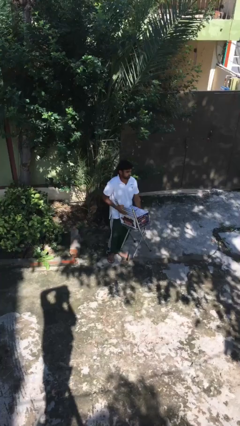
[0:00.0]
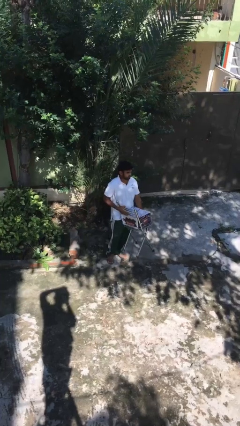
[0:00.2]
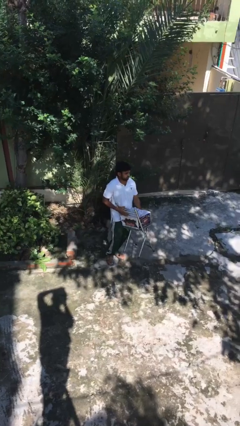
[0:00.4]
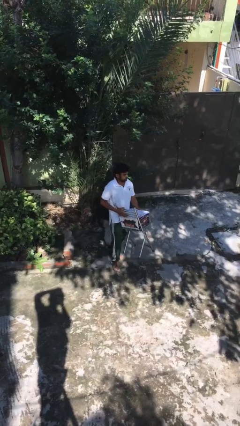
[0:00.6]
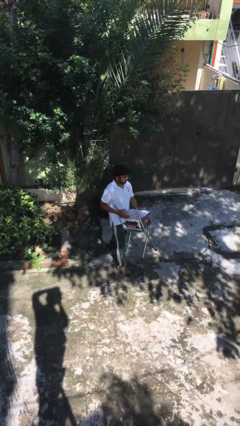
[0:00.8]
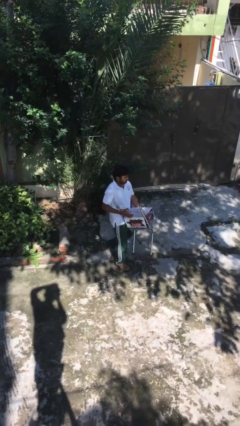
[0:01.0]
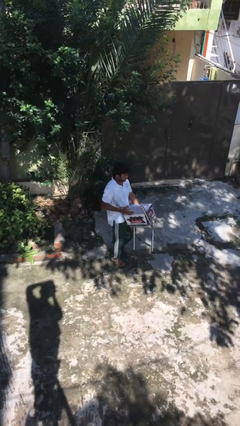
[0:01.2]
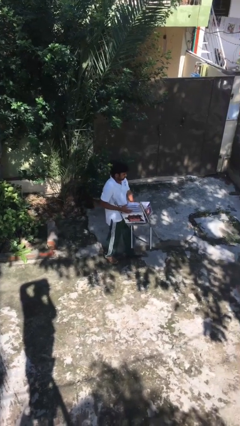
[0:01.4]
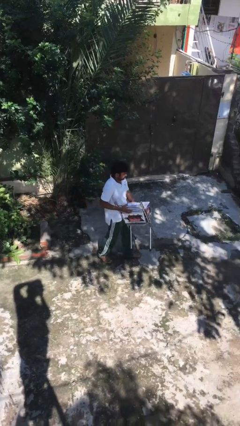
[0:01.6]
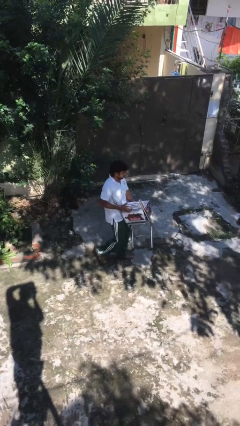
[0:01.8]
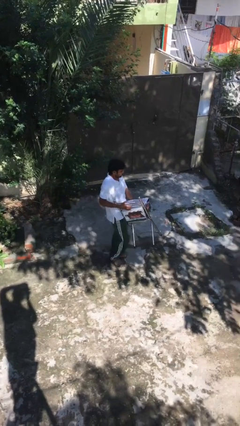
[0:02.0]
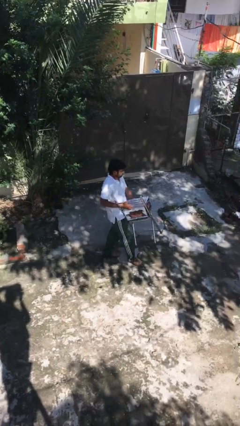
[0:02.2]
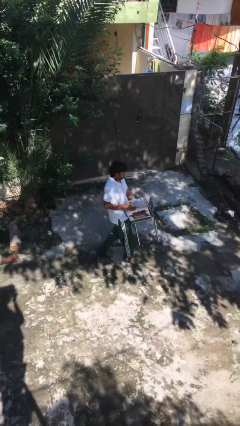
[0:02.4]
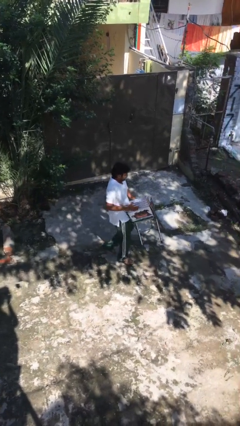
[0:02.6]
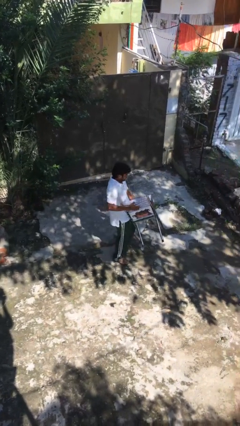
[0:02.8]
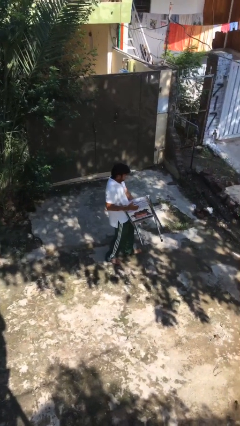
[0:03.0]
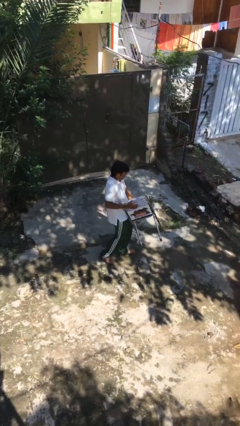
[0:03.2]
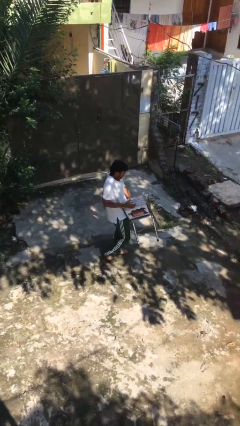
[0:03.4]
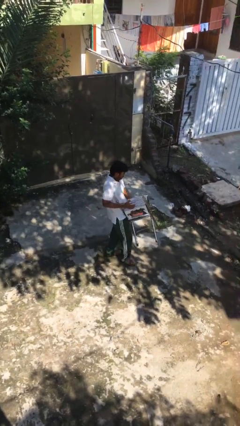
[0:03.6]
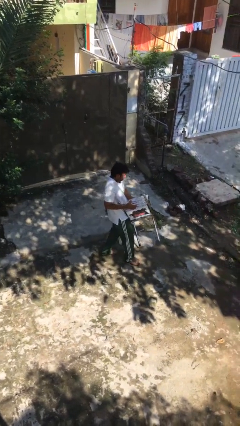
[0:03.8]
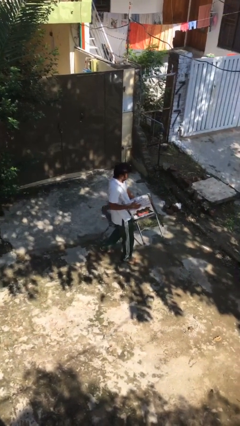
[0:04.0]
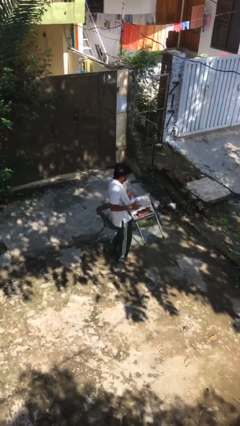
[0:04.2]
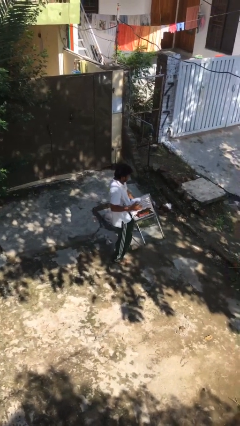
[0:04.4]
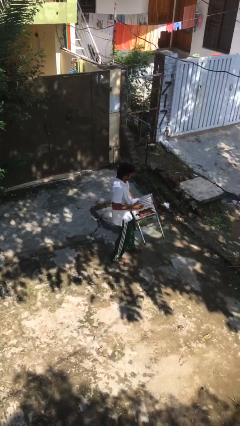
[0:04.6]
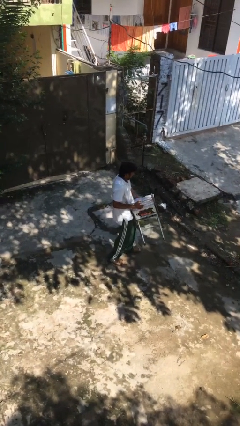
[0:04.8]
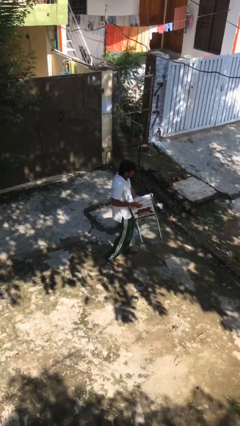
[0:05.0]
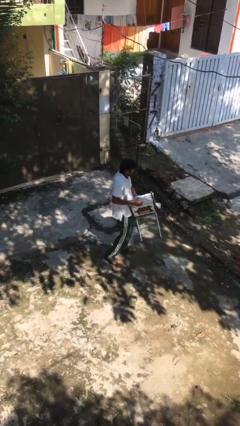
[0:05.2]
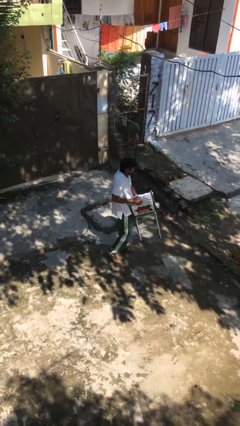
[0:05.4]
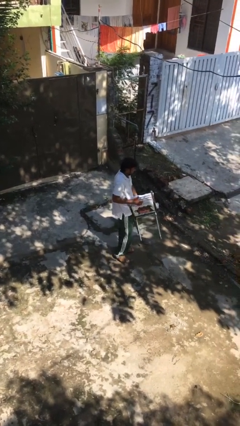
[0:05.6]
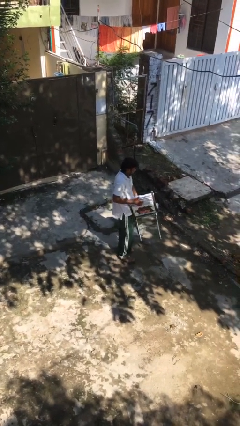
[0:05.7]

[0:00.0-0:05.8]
person carries heavy object

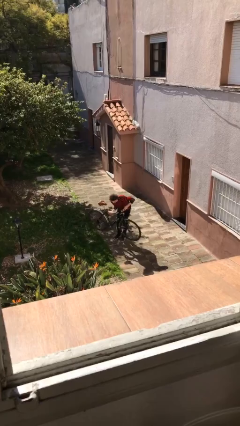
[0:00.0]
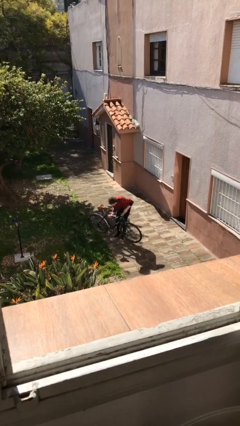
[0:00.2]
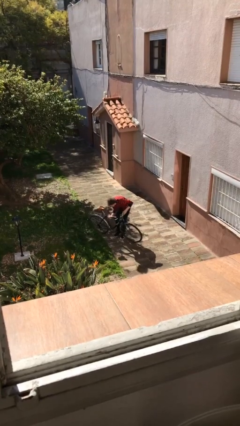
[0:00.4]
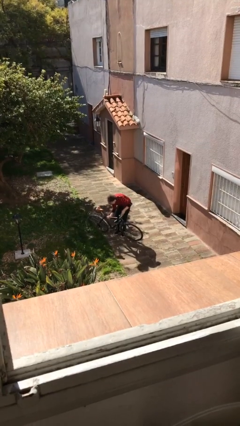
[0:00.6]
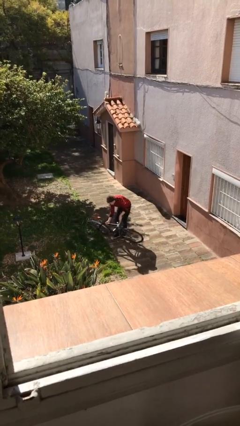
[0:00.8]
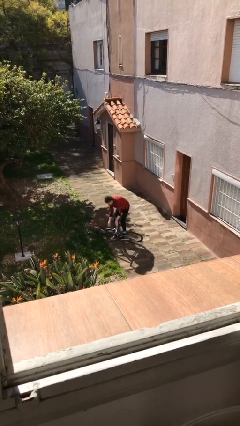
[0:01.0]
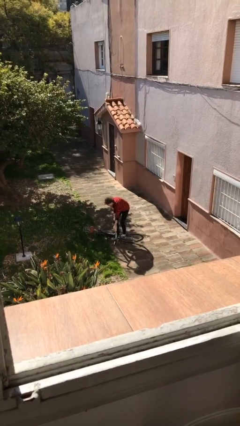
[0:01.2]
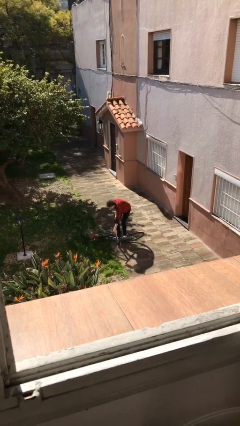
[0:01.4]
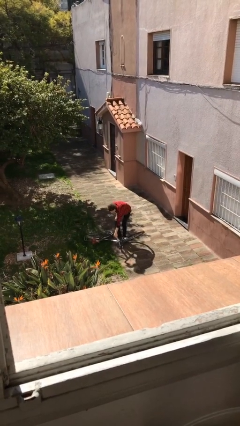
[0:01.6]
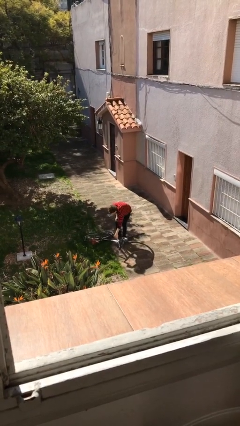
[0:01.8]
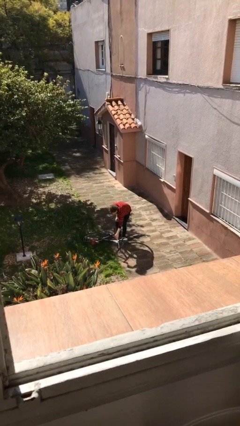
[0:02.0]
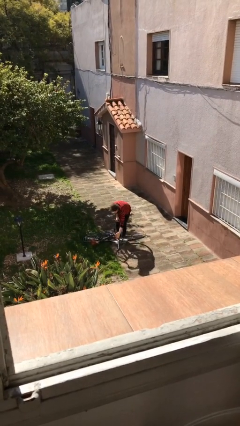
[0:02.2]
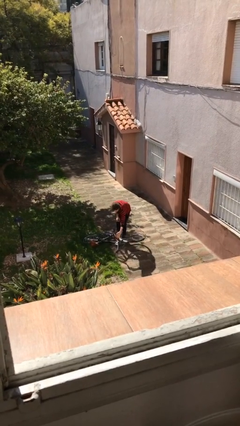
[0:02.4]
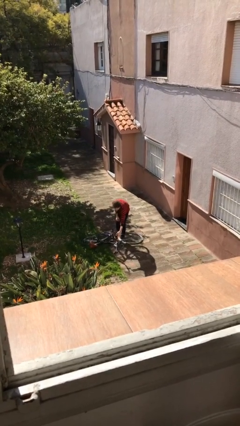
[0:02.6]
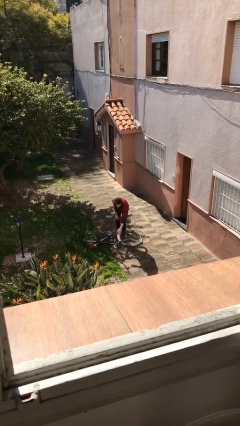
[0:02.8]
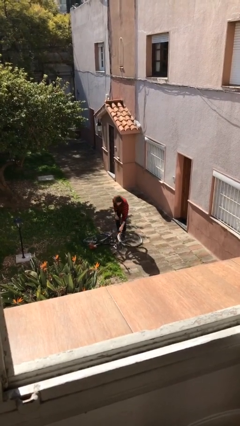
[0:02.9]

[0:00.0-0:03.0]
person puts down object on floor

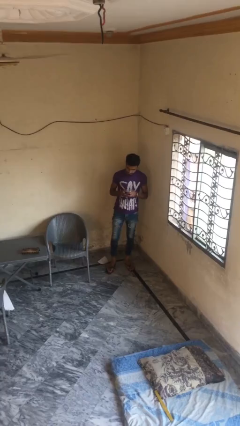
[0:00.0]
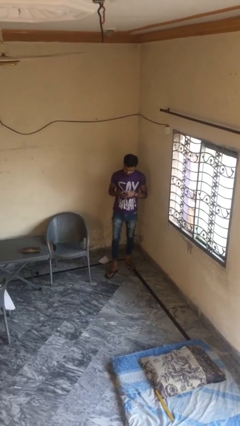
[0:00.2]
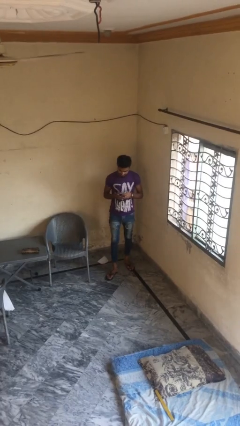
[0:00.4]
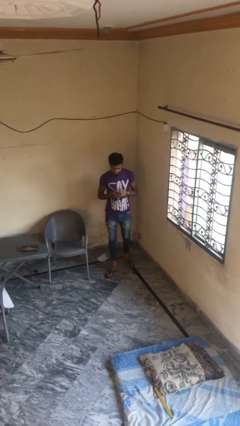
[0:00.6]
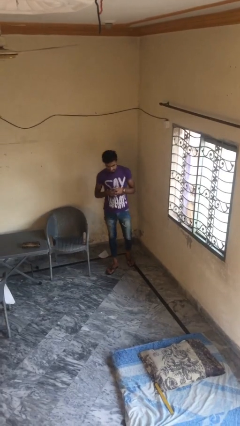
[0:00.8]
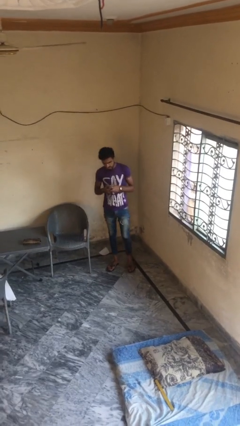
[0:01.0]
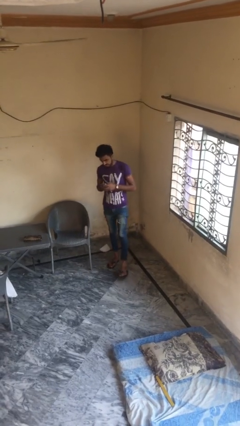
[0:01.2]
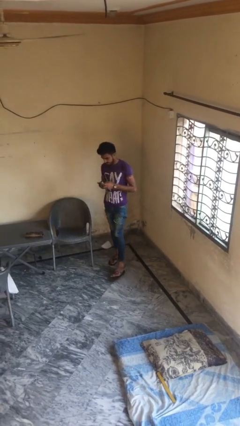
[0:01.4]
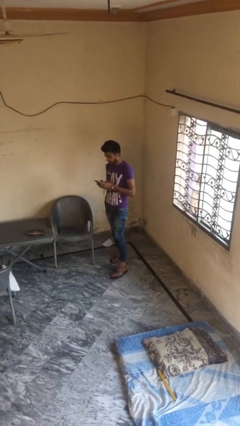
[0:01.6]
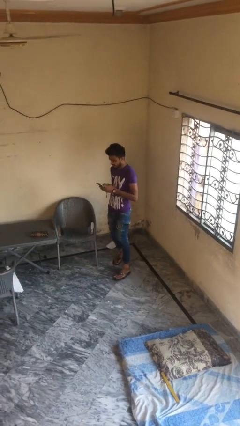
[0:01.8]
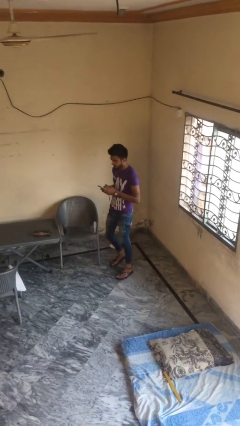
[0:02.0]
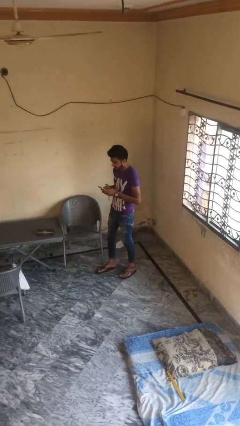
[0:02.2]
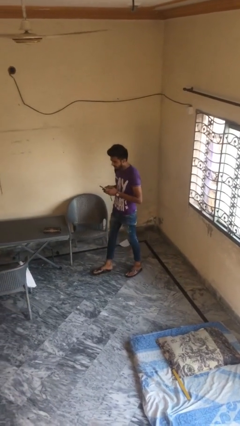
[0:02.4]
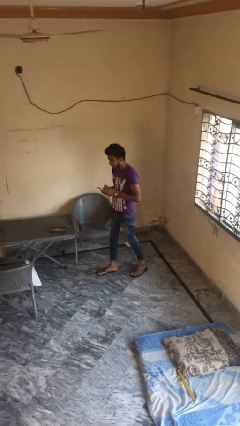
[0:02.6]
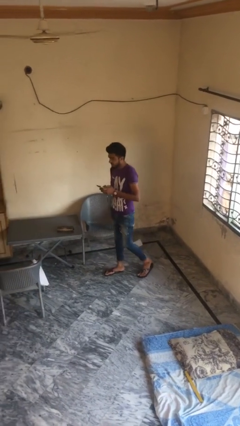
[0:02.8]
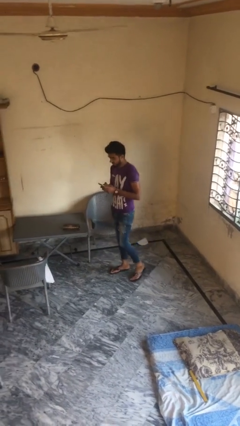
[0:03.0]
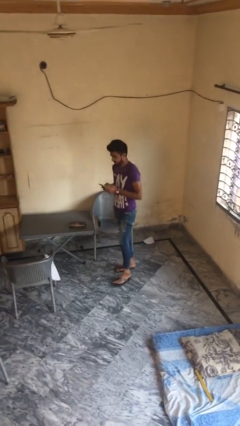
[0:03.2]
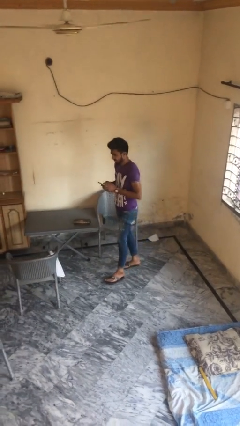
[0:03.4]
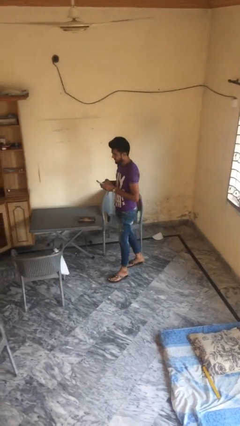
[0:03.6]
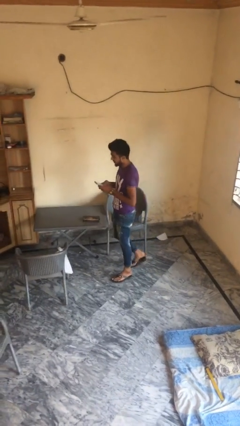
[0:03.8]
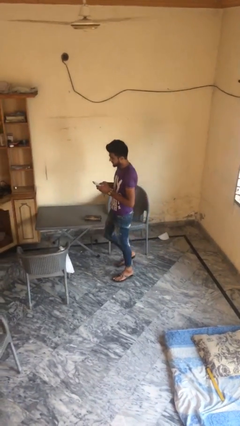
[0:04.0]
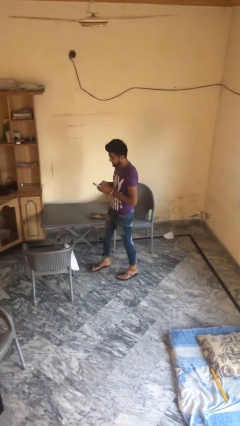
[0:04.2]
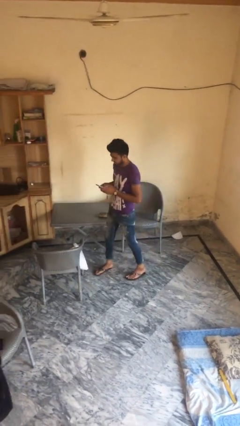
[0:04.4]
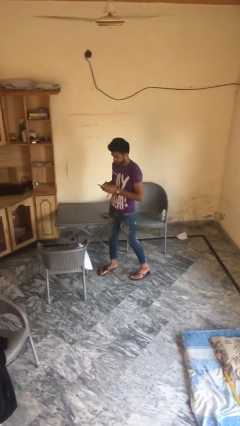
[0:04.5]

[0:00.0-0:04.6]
person texts on phone

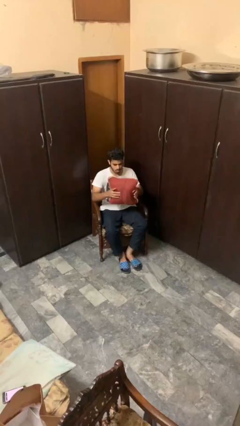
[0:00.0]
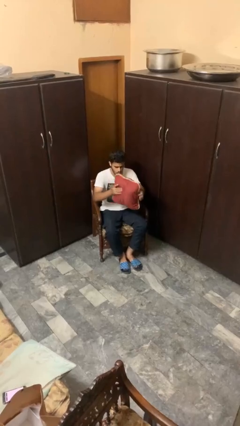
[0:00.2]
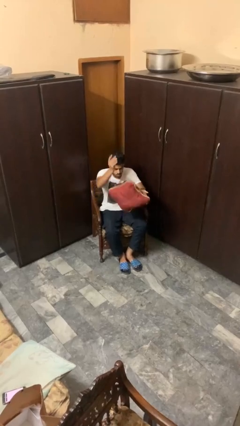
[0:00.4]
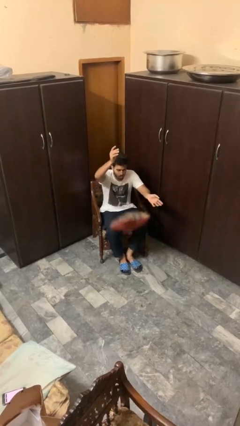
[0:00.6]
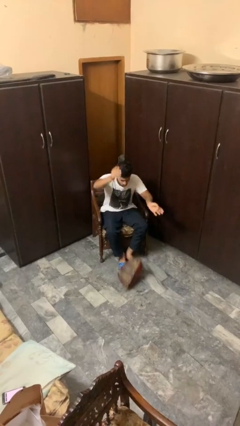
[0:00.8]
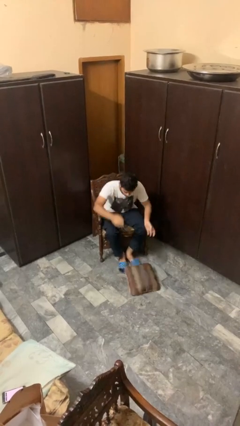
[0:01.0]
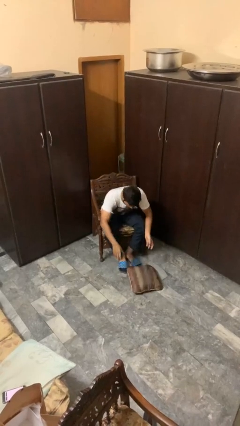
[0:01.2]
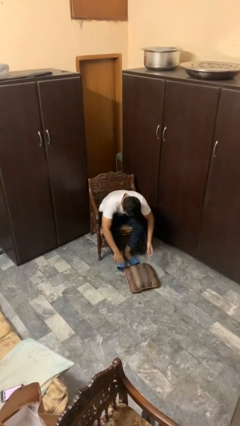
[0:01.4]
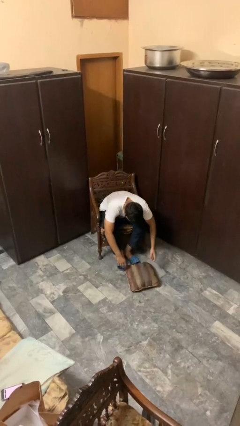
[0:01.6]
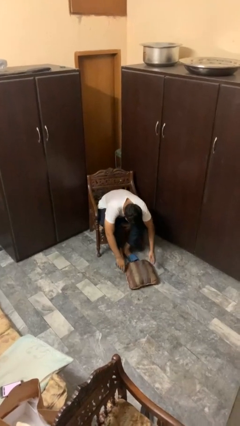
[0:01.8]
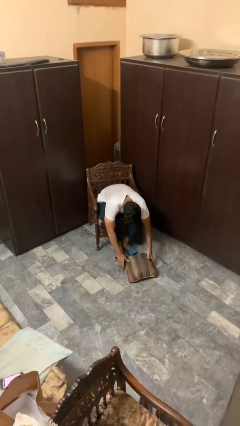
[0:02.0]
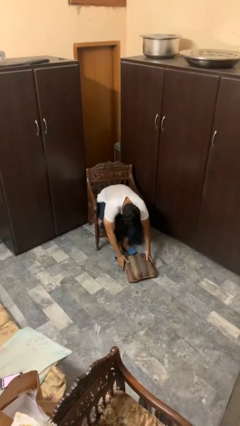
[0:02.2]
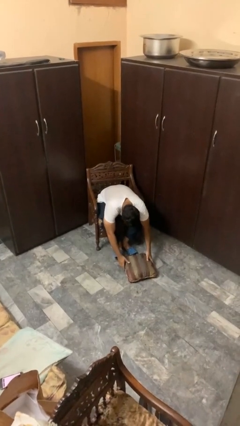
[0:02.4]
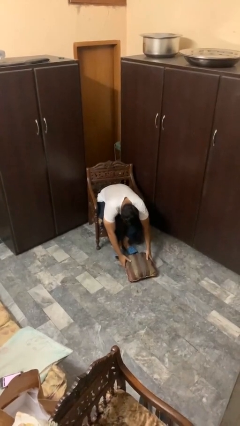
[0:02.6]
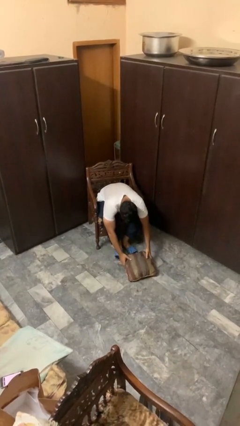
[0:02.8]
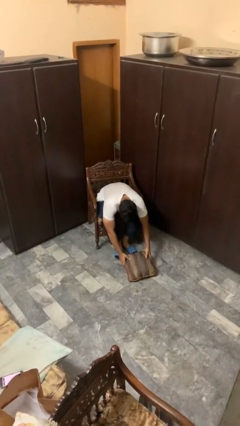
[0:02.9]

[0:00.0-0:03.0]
person drops object

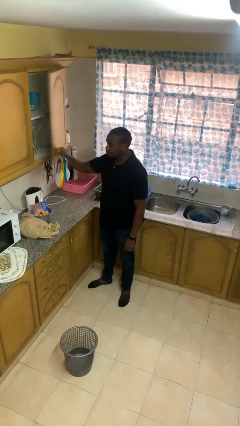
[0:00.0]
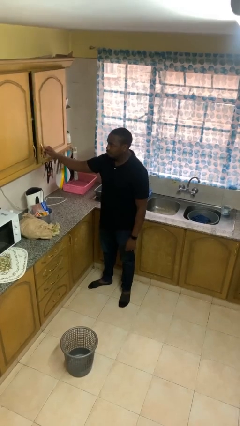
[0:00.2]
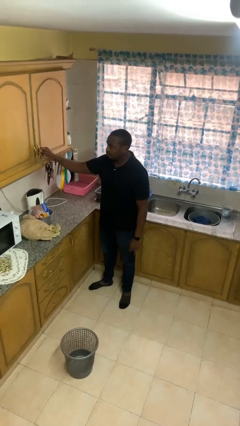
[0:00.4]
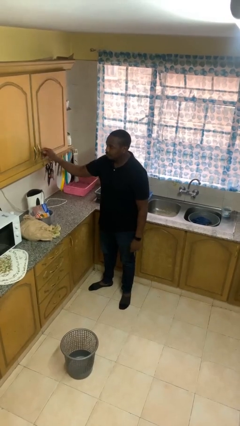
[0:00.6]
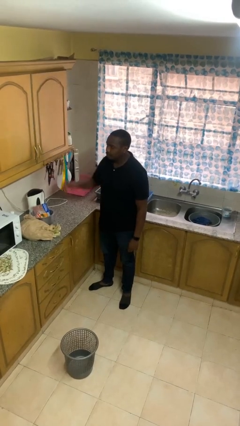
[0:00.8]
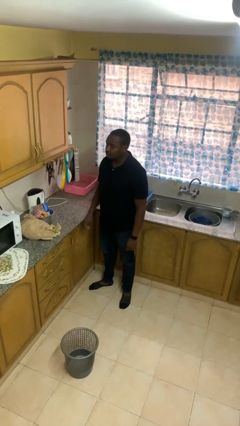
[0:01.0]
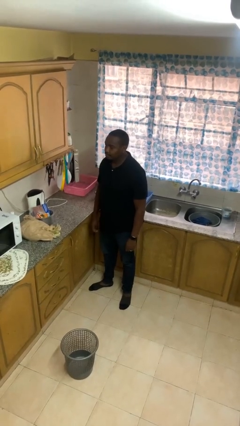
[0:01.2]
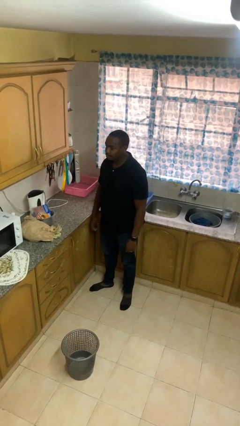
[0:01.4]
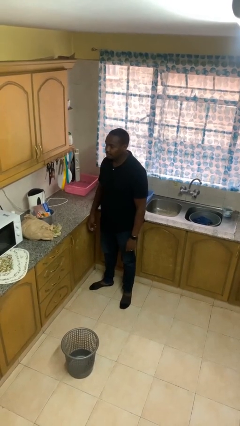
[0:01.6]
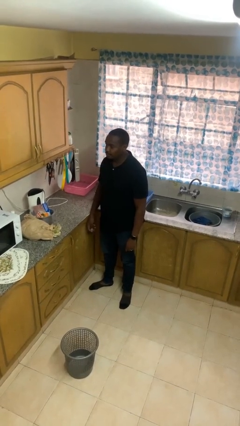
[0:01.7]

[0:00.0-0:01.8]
person closes cabinet
